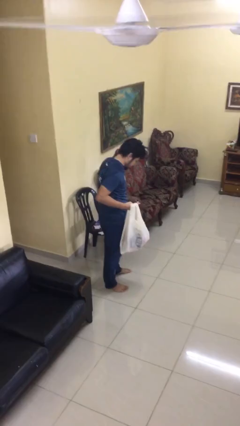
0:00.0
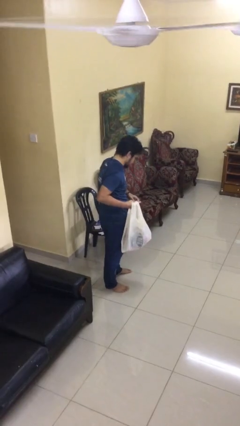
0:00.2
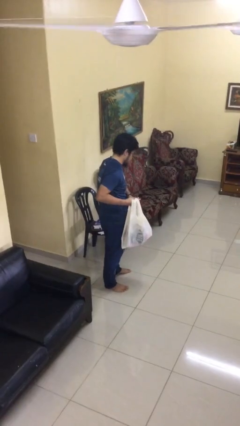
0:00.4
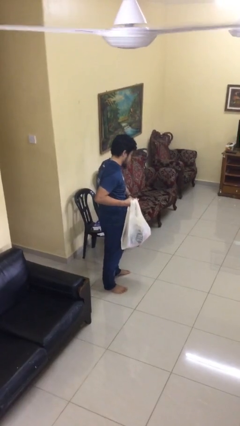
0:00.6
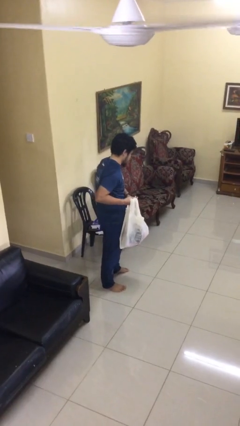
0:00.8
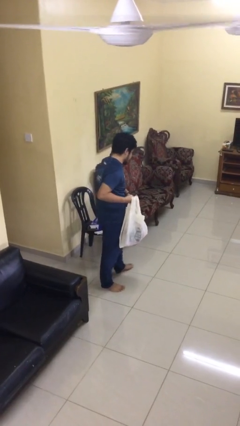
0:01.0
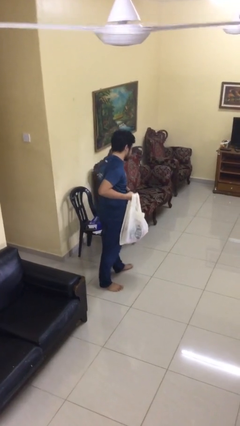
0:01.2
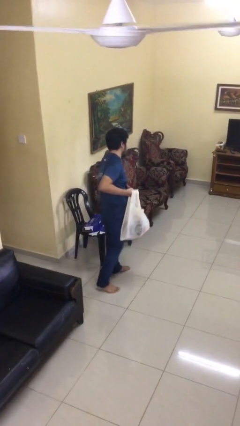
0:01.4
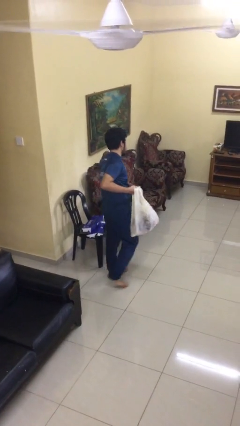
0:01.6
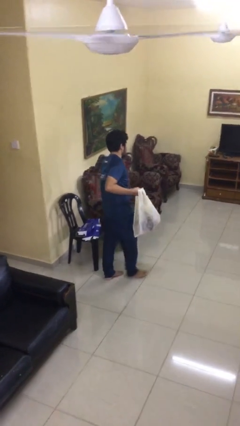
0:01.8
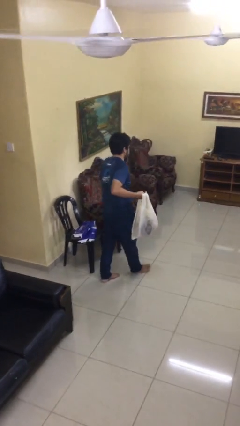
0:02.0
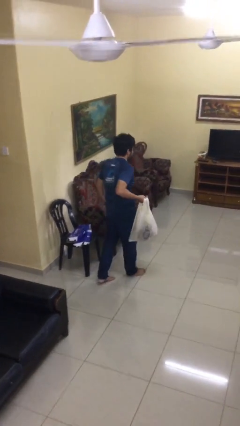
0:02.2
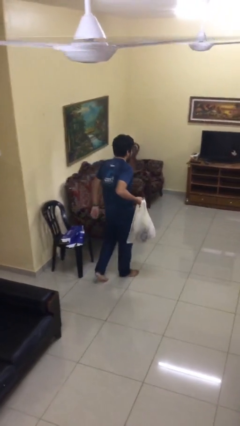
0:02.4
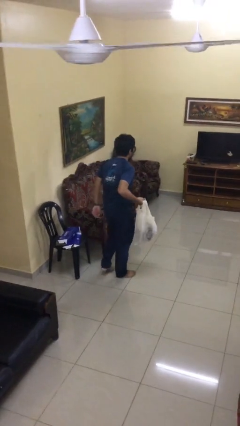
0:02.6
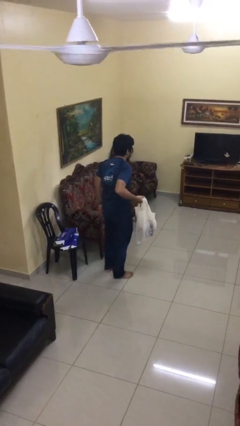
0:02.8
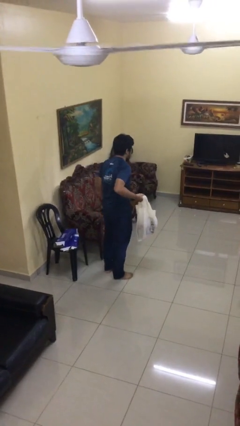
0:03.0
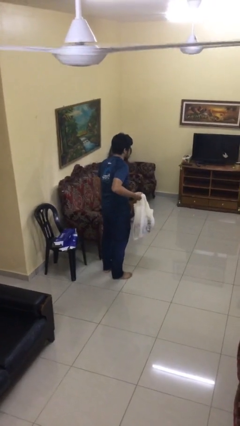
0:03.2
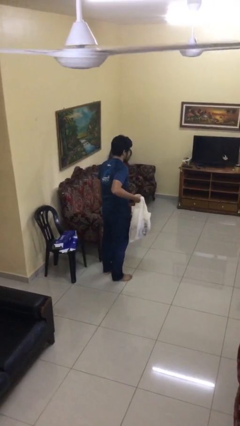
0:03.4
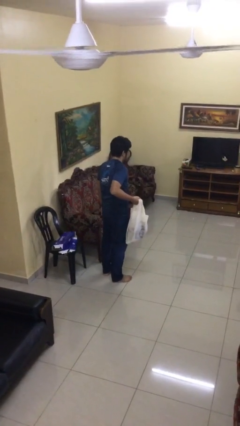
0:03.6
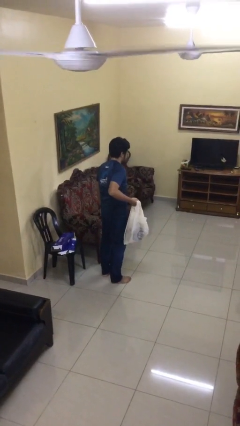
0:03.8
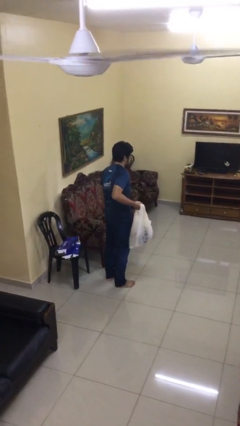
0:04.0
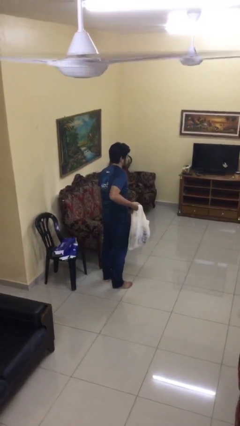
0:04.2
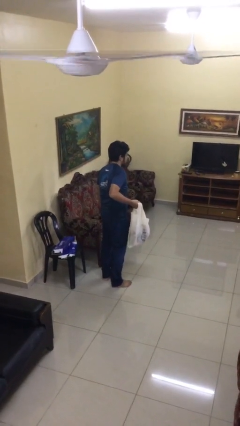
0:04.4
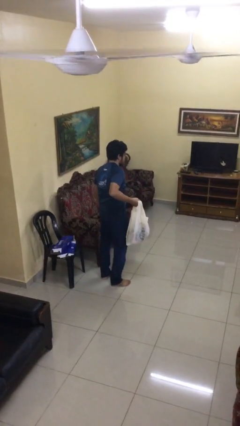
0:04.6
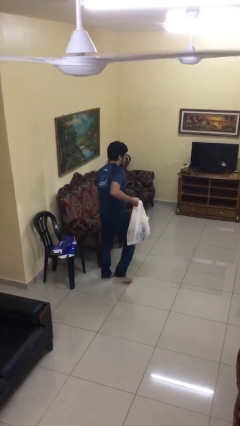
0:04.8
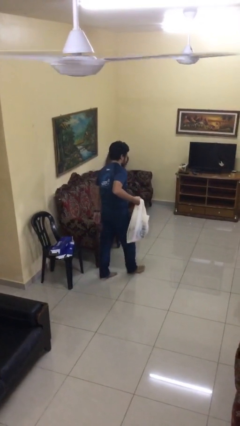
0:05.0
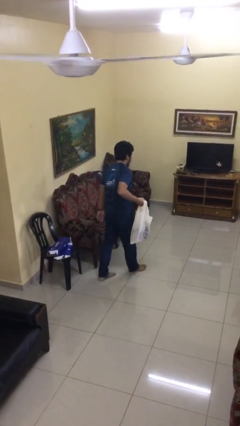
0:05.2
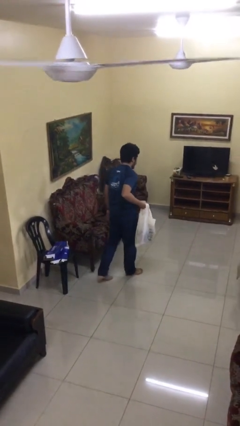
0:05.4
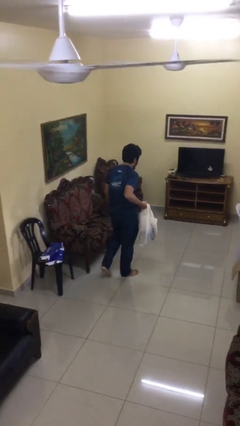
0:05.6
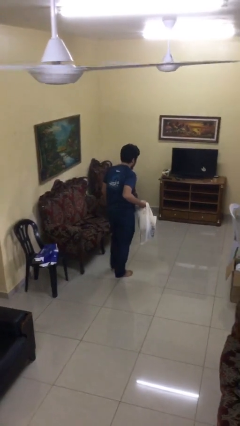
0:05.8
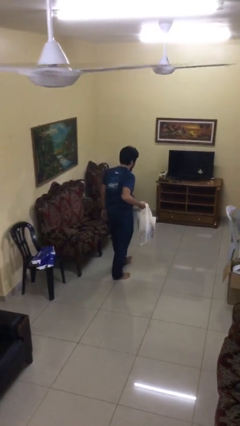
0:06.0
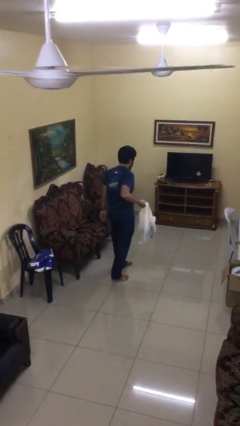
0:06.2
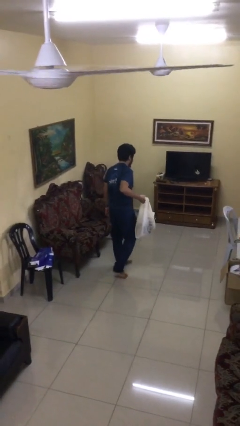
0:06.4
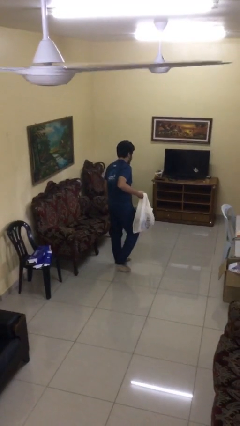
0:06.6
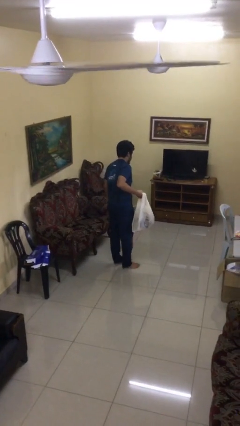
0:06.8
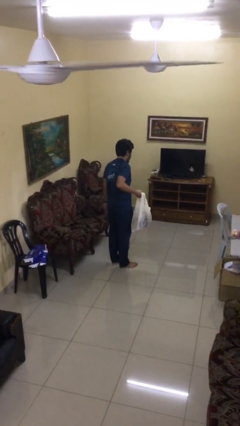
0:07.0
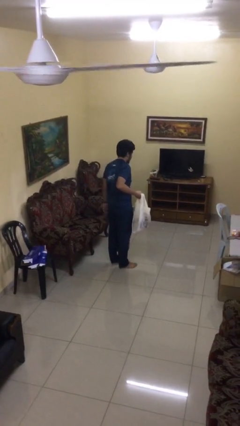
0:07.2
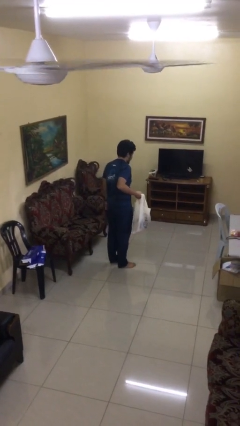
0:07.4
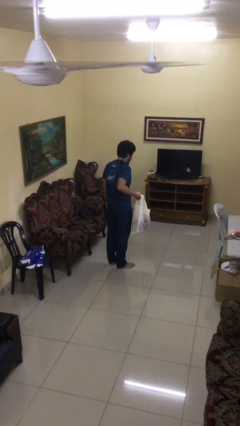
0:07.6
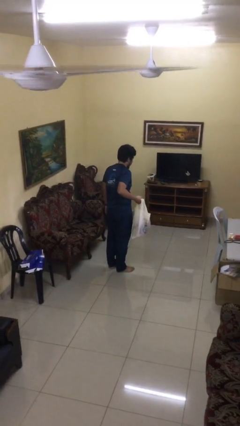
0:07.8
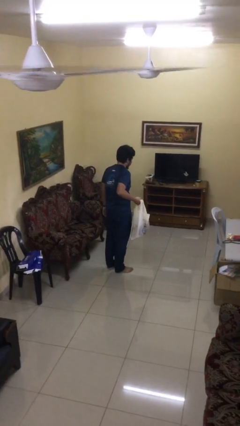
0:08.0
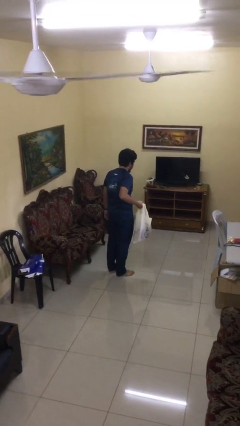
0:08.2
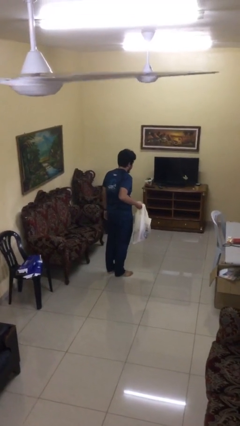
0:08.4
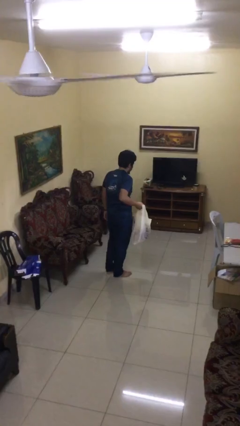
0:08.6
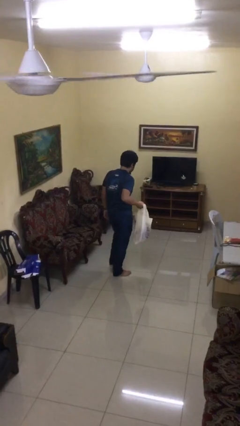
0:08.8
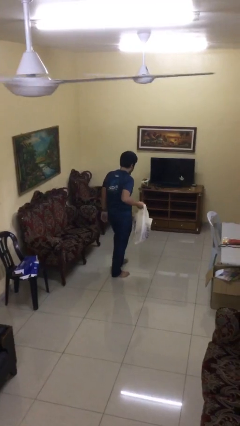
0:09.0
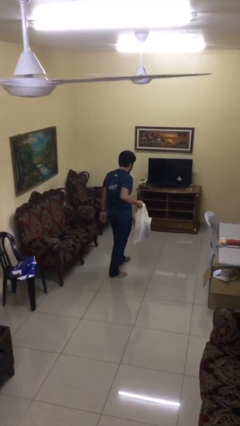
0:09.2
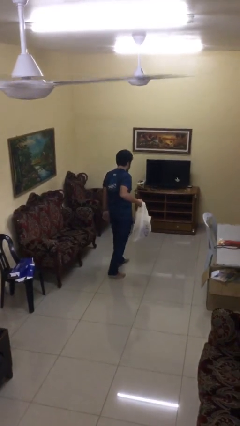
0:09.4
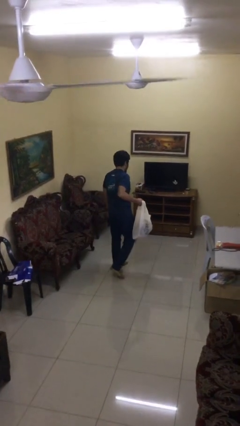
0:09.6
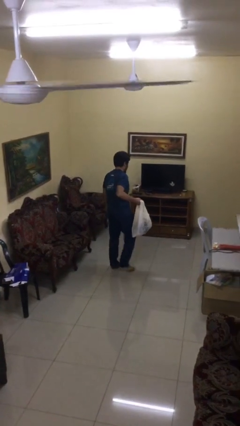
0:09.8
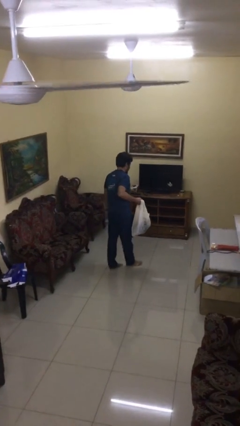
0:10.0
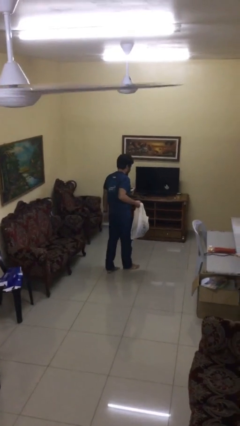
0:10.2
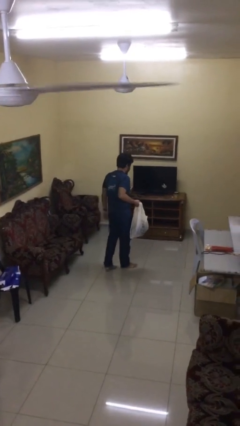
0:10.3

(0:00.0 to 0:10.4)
person carries groceries

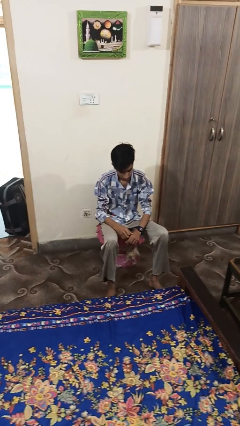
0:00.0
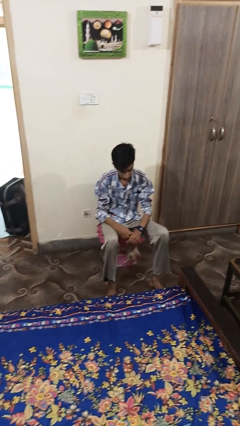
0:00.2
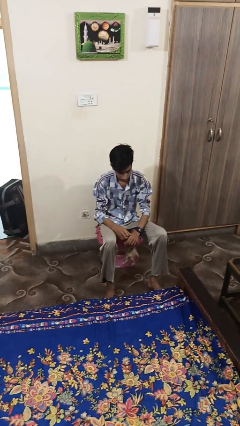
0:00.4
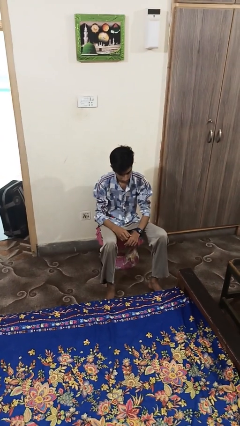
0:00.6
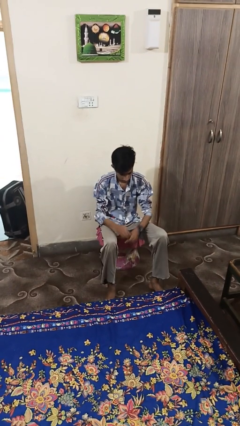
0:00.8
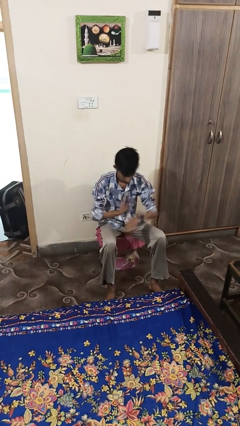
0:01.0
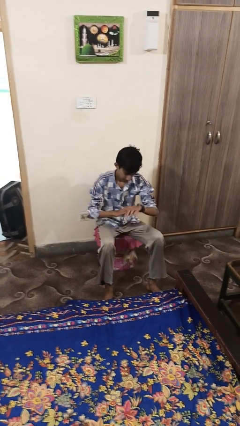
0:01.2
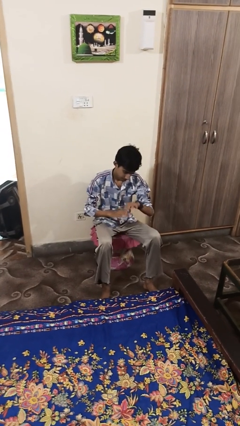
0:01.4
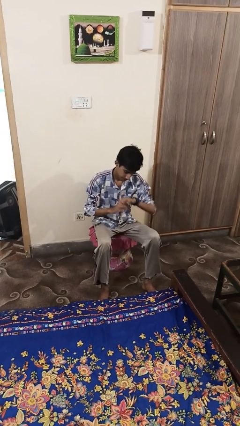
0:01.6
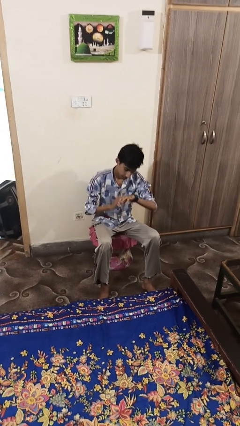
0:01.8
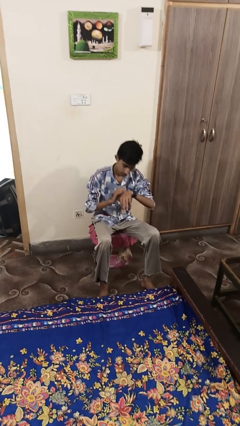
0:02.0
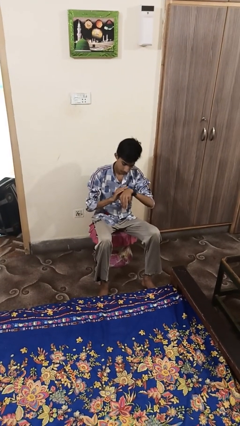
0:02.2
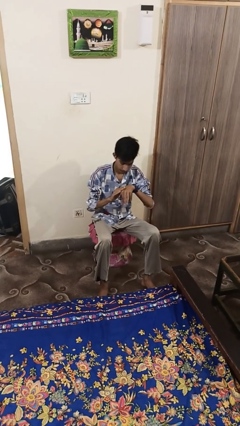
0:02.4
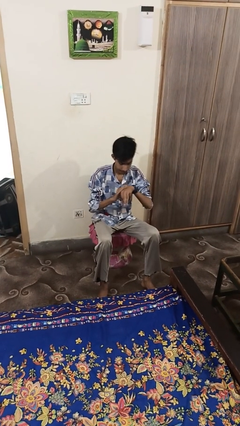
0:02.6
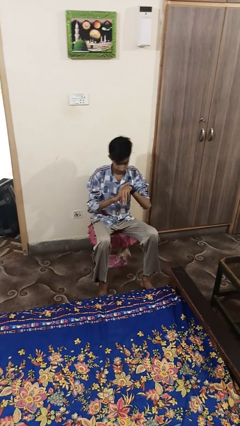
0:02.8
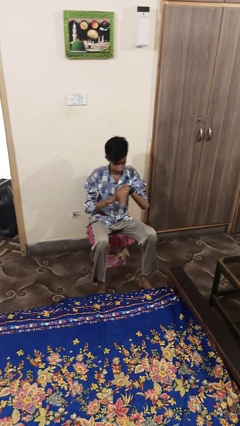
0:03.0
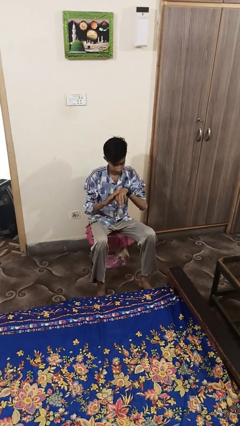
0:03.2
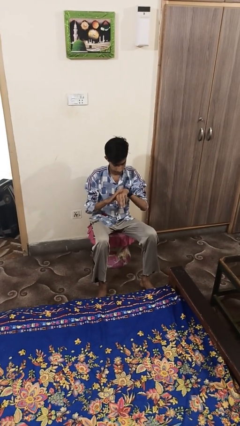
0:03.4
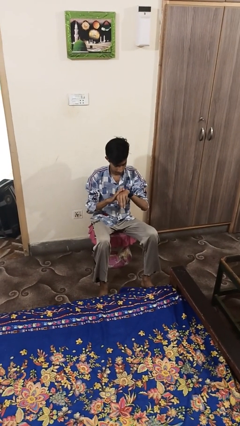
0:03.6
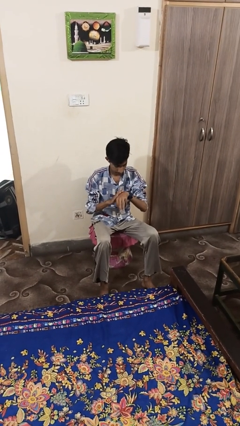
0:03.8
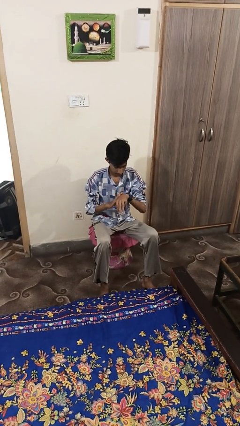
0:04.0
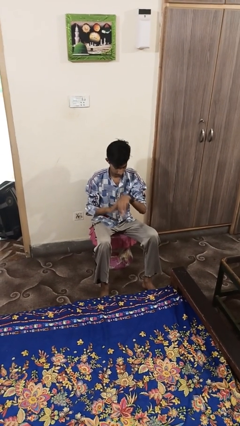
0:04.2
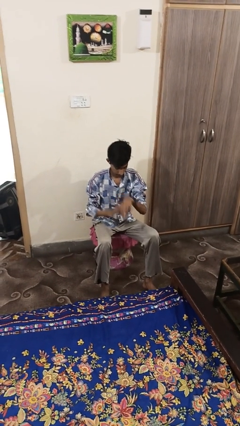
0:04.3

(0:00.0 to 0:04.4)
person swats bug

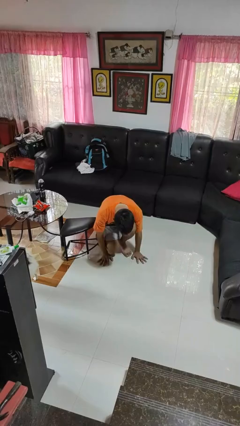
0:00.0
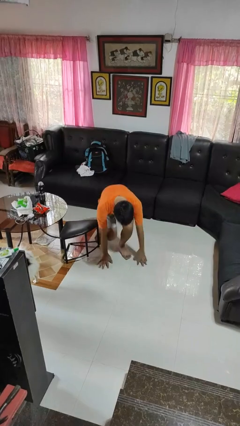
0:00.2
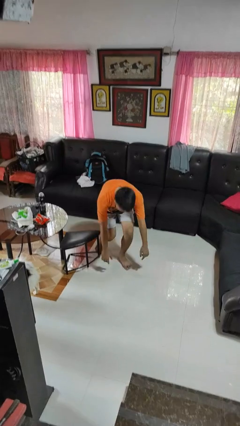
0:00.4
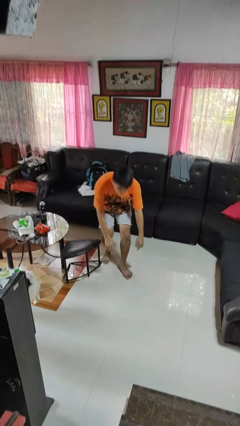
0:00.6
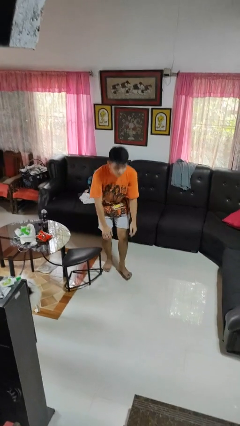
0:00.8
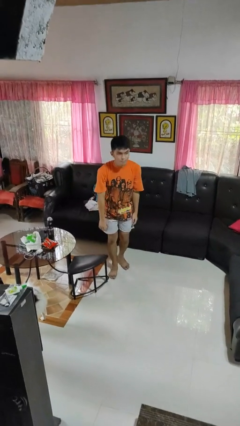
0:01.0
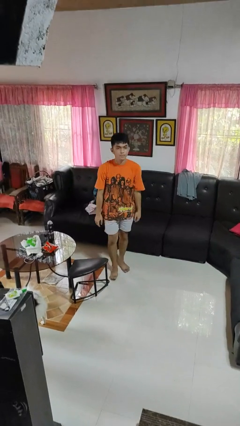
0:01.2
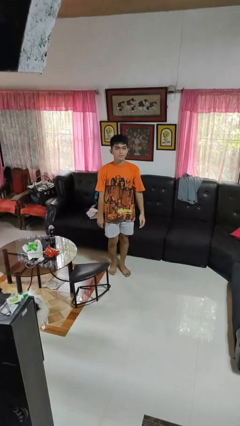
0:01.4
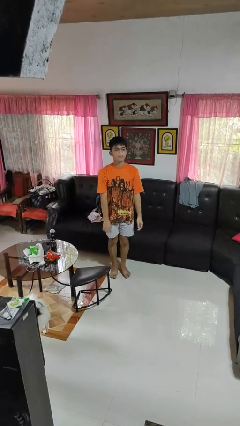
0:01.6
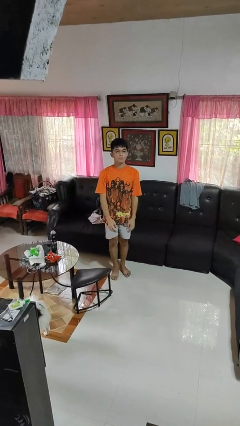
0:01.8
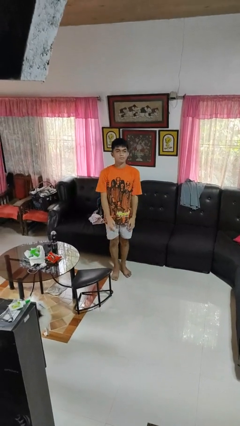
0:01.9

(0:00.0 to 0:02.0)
person stands up from floor

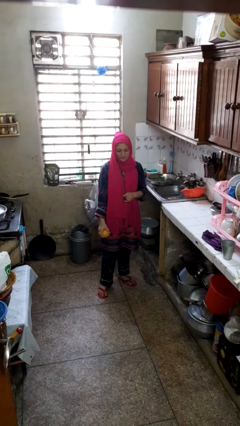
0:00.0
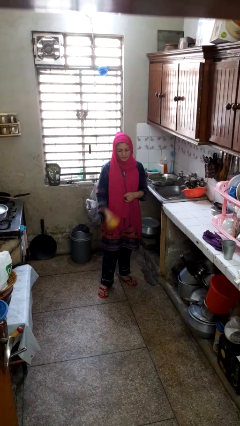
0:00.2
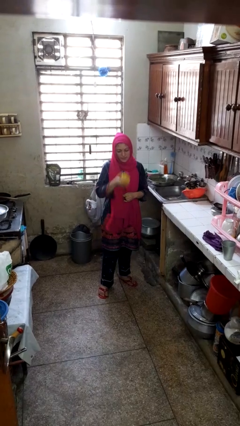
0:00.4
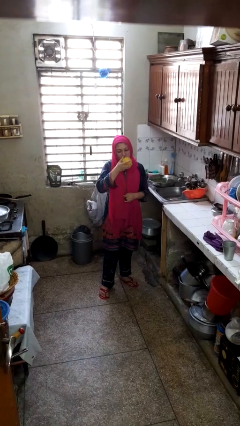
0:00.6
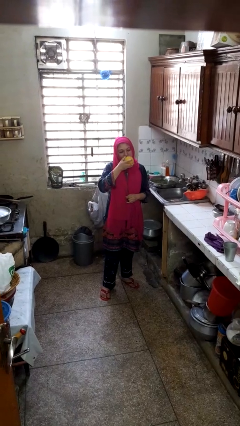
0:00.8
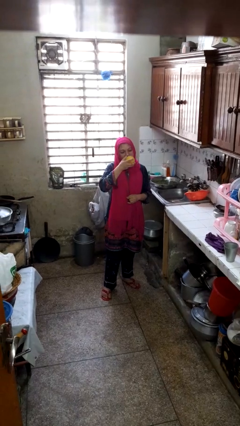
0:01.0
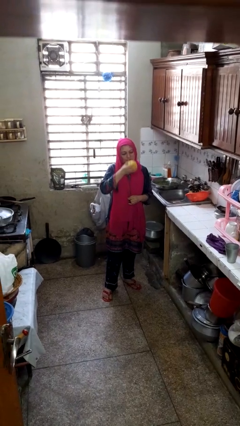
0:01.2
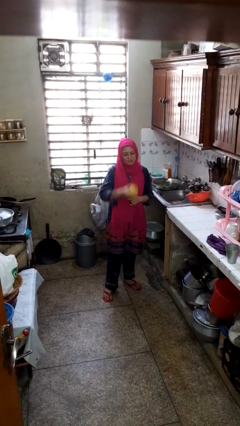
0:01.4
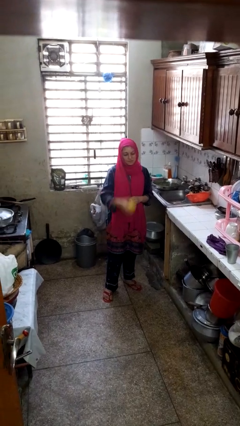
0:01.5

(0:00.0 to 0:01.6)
person eats apple
